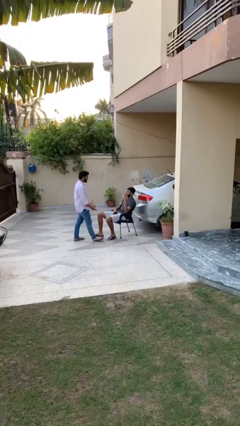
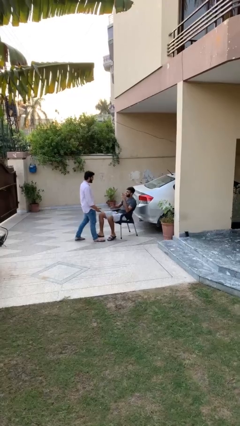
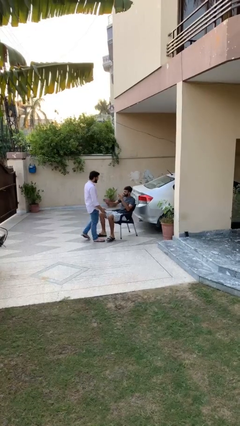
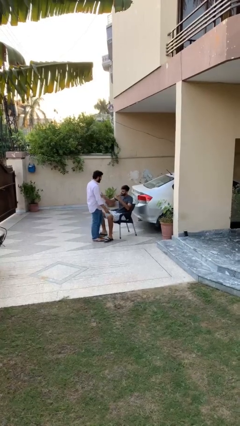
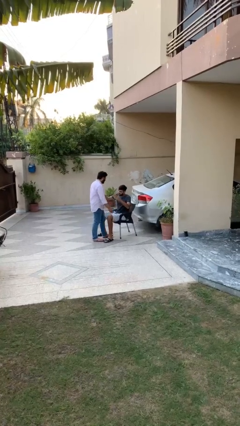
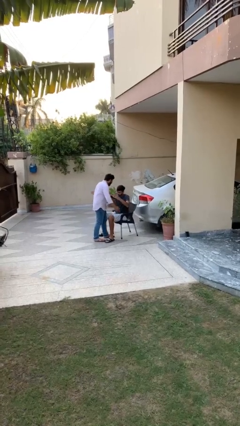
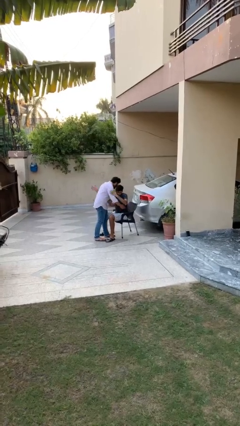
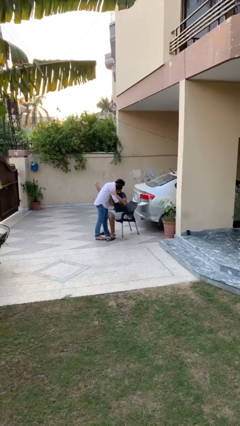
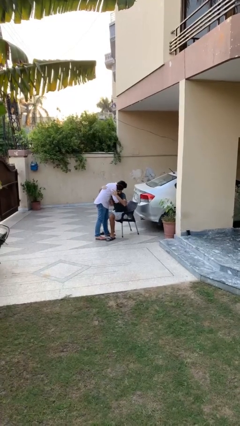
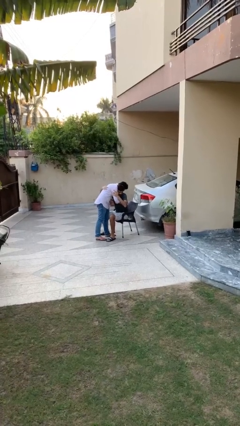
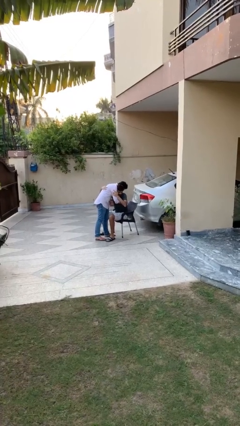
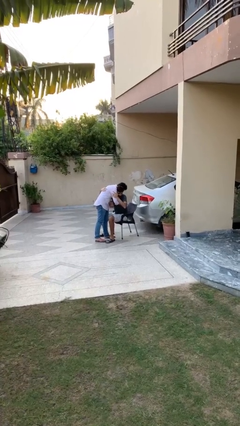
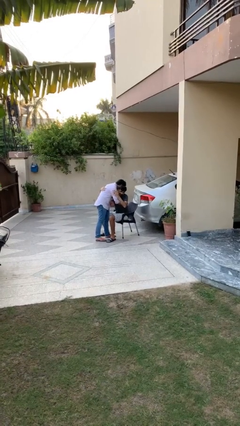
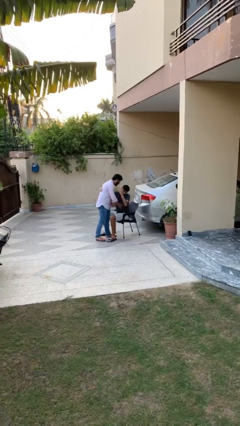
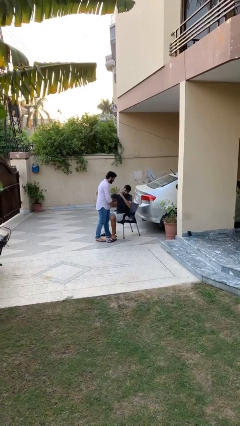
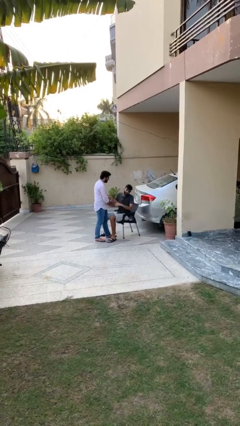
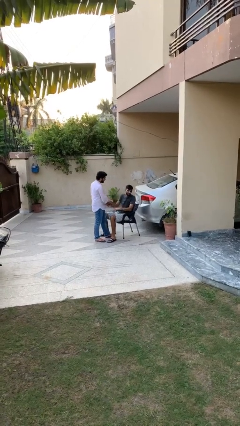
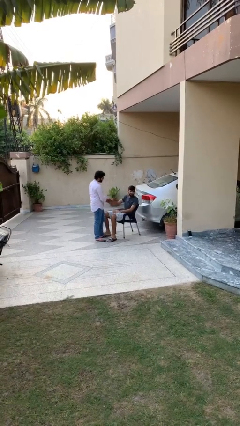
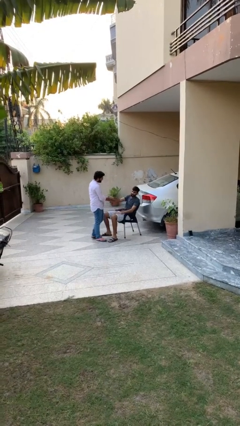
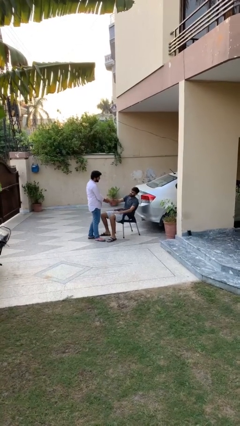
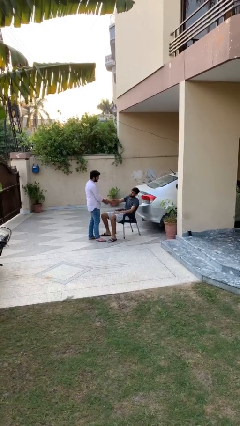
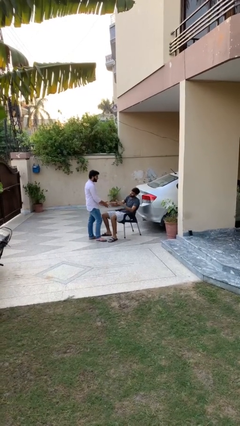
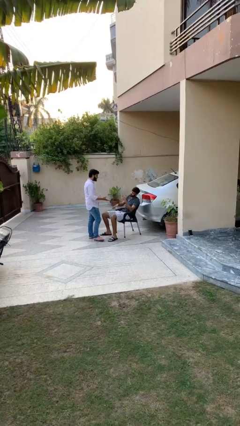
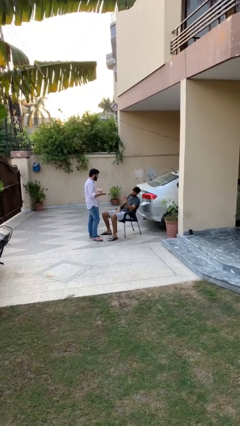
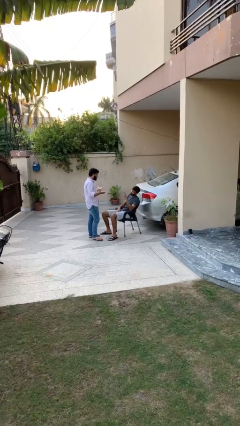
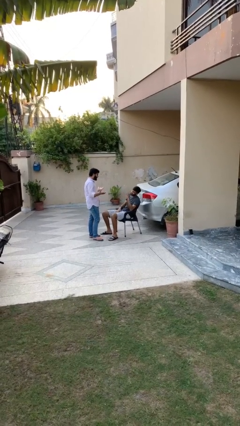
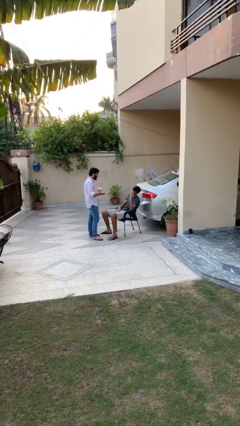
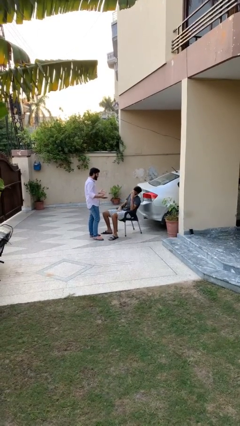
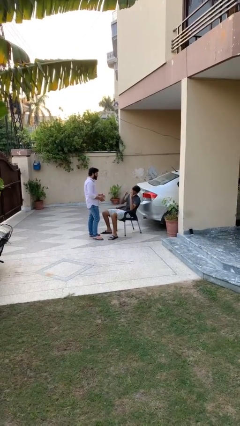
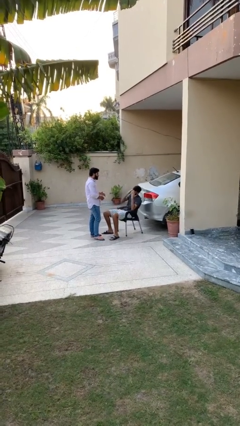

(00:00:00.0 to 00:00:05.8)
person embraces person

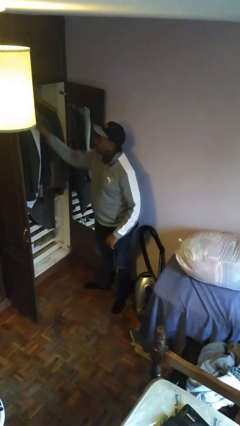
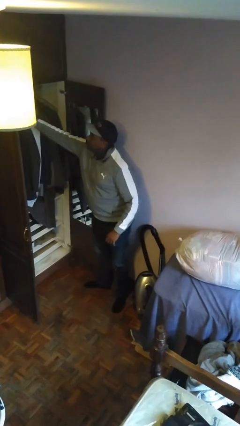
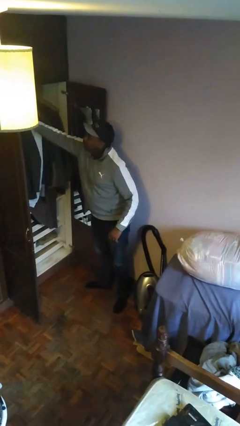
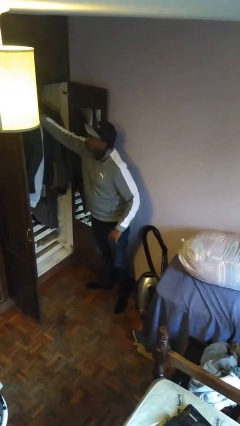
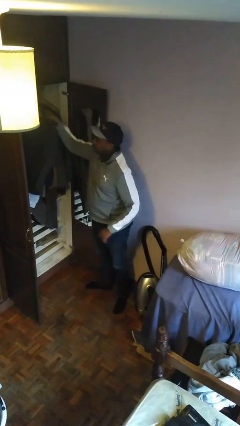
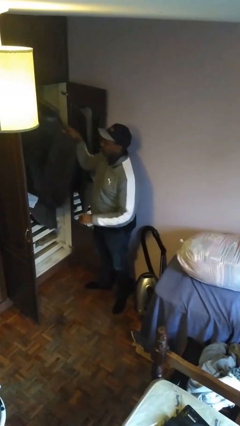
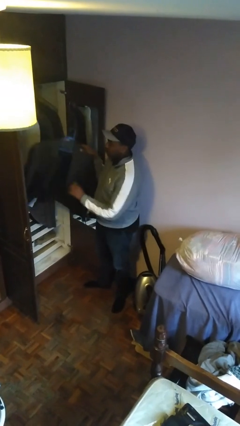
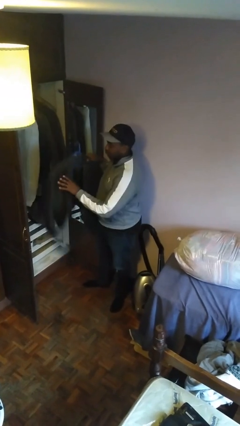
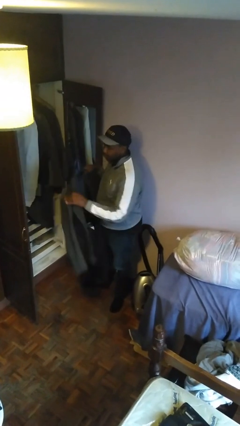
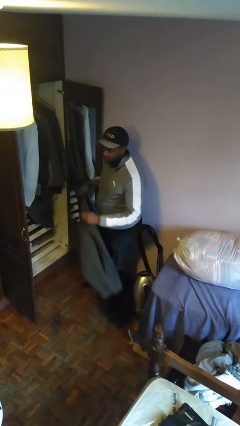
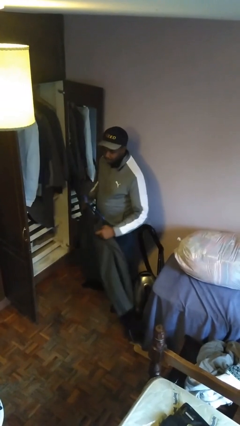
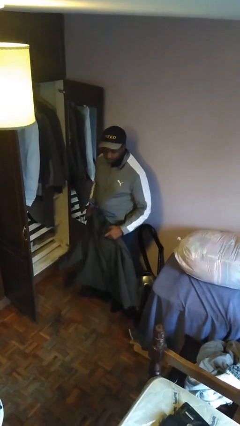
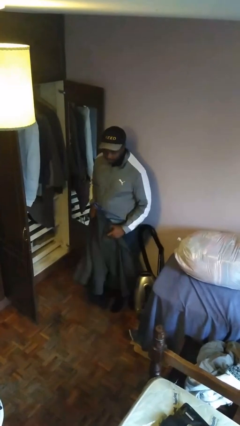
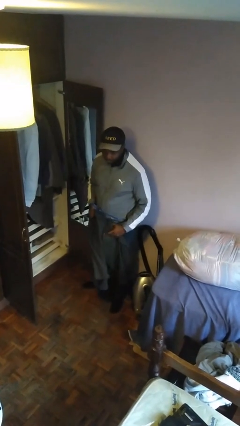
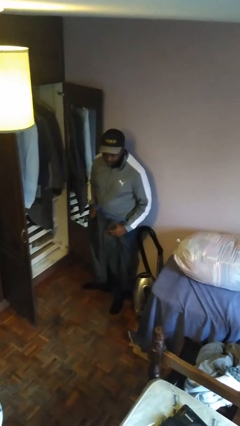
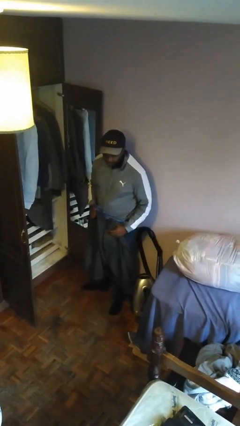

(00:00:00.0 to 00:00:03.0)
person takes clothes from closet

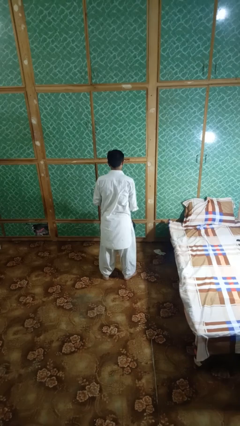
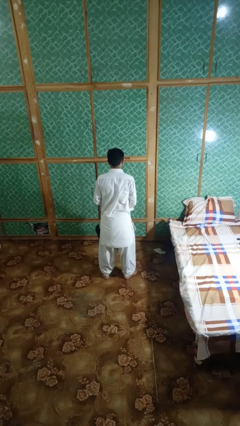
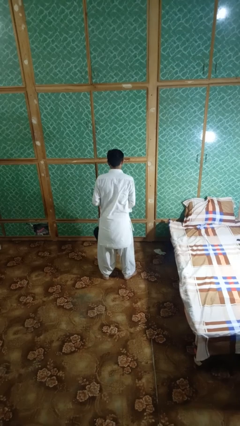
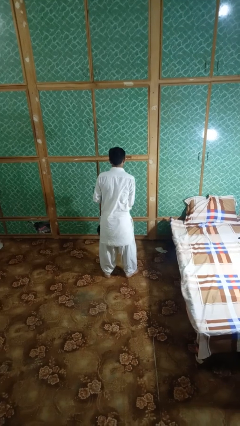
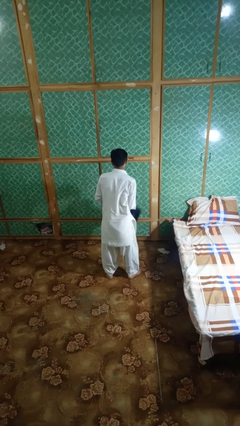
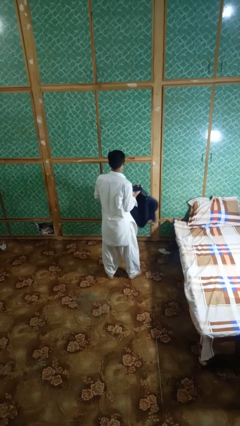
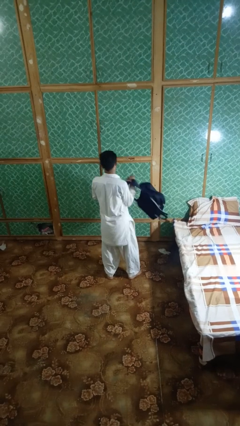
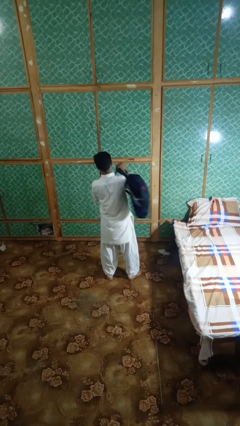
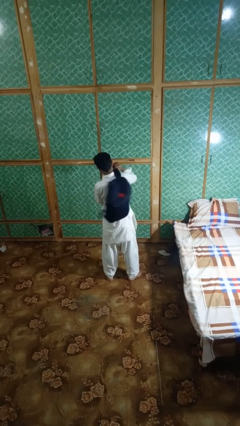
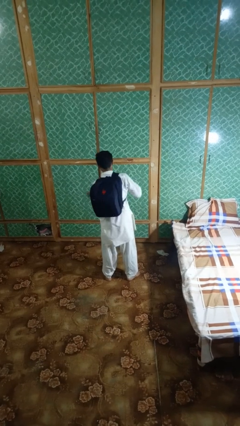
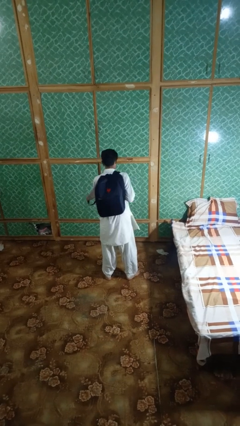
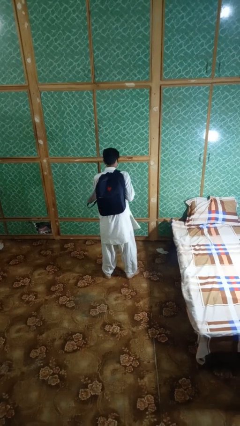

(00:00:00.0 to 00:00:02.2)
person puts on backpack

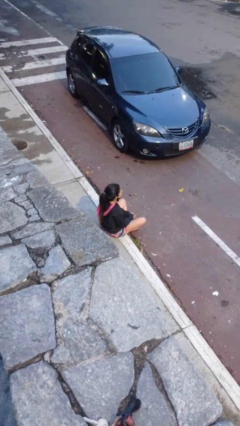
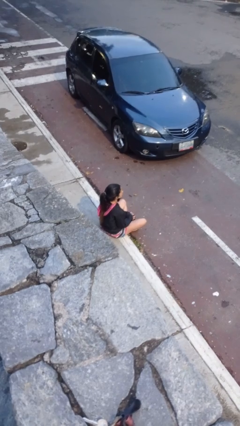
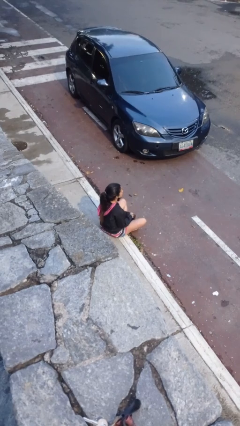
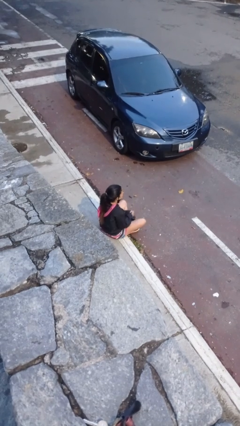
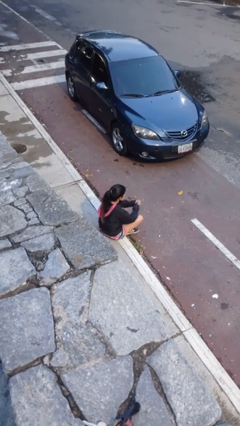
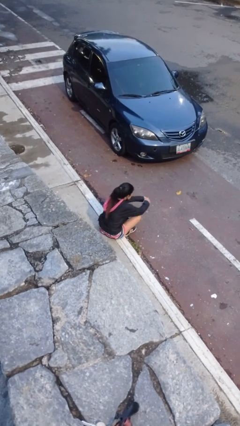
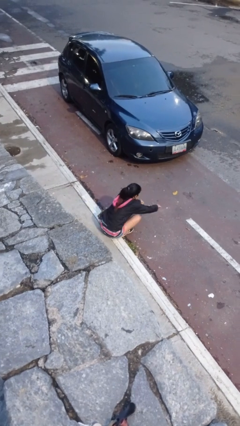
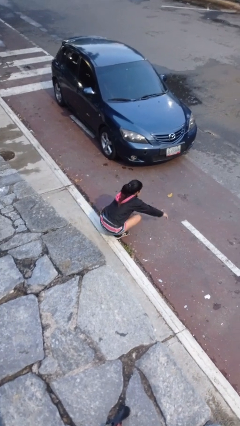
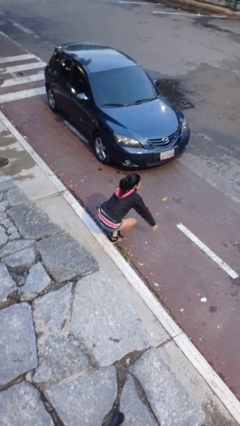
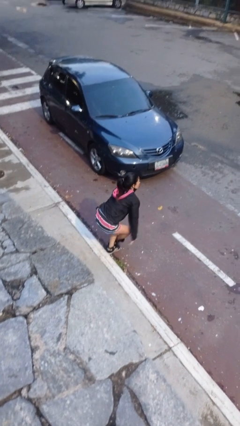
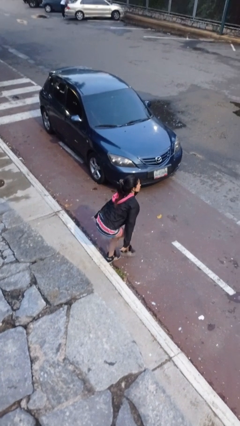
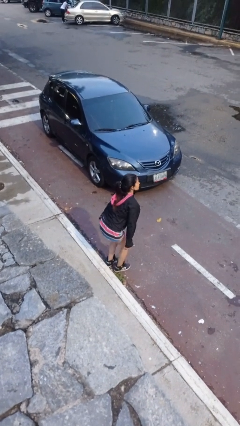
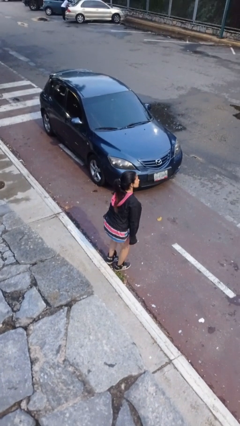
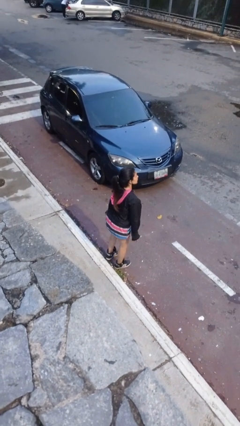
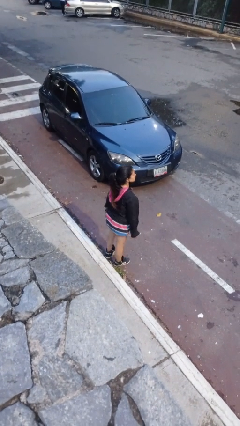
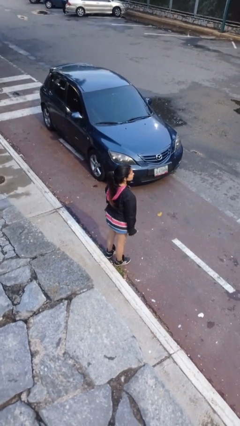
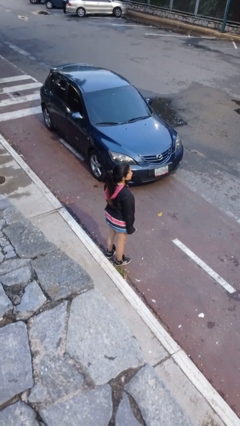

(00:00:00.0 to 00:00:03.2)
person stands up from floor

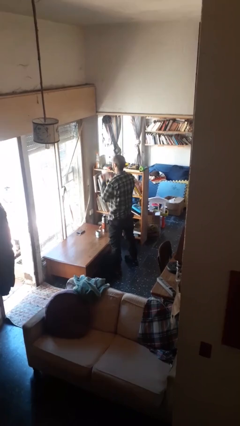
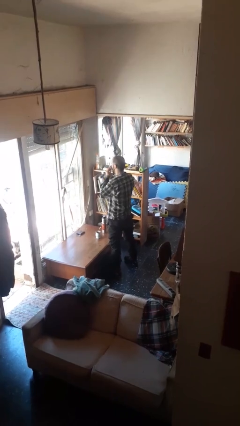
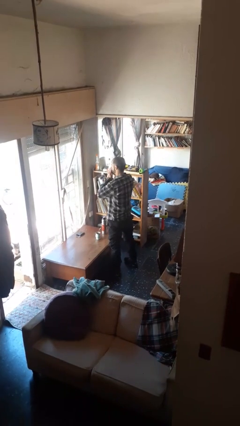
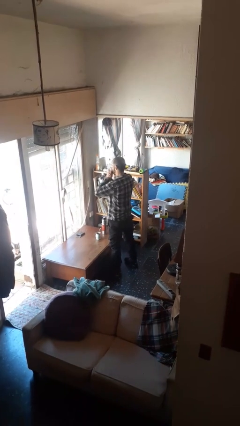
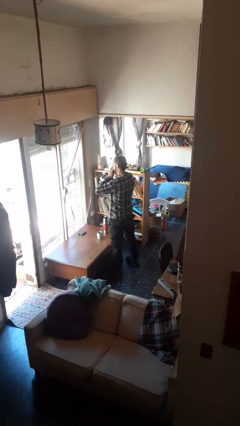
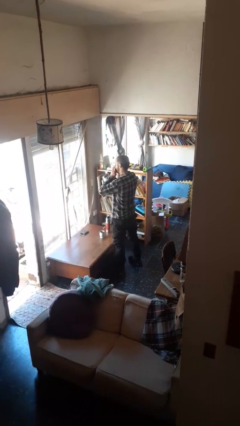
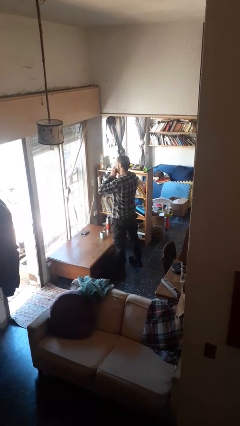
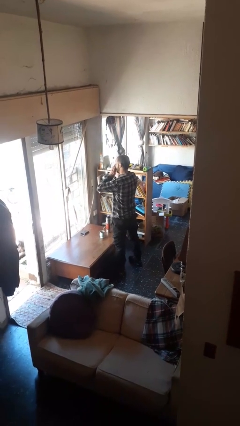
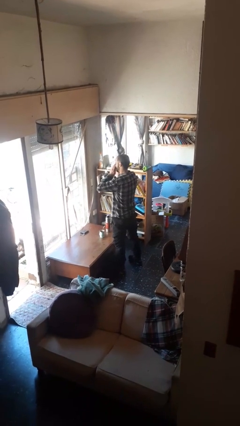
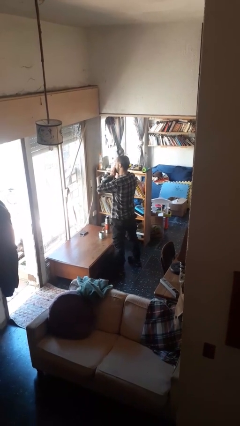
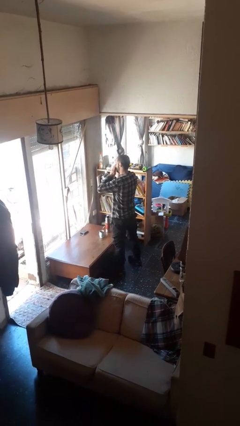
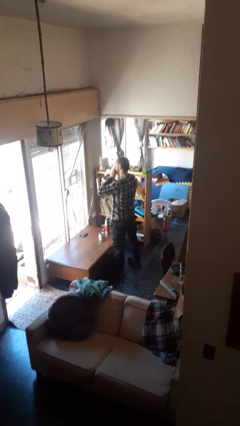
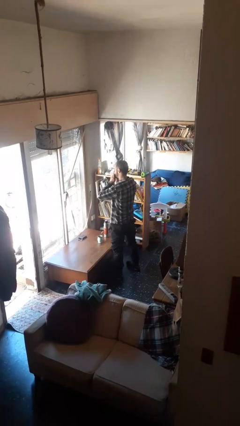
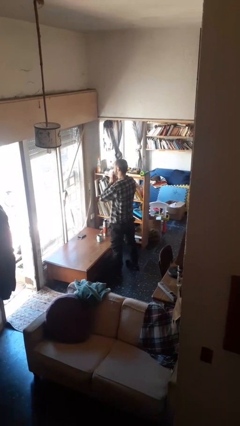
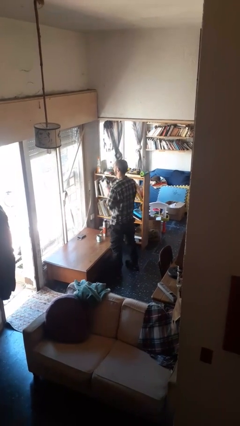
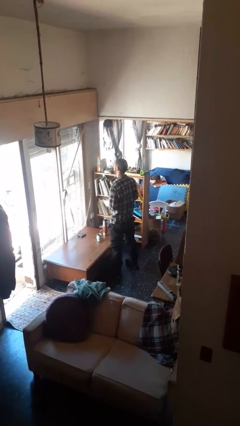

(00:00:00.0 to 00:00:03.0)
person blows nose
